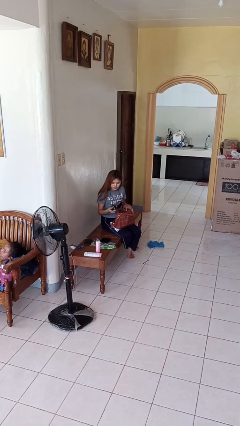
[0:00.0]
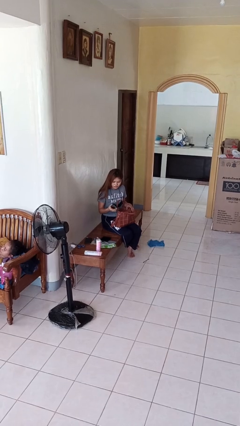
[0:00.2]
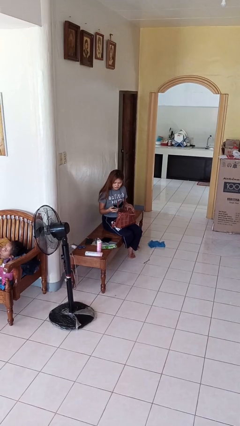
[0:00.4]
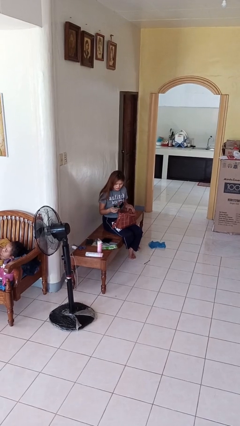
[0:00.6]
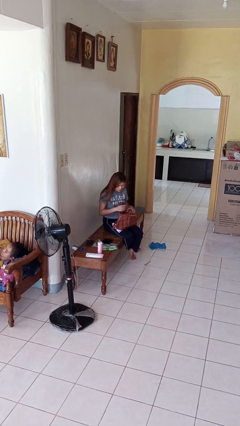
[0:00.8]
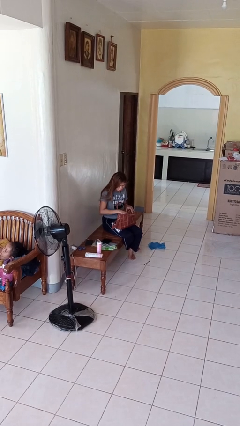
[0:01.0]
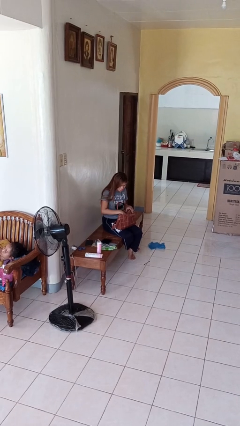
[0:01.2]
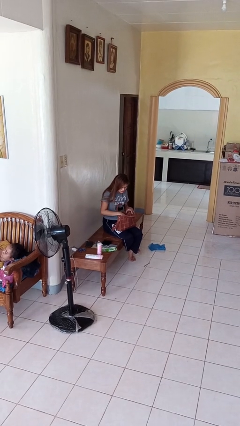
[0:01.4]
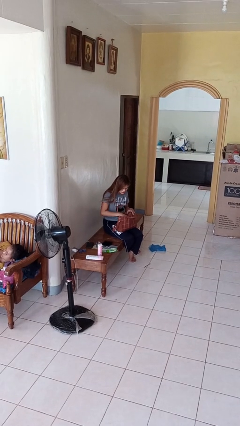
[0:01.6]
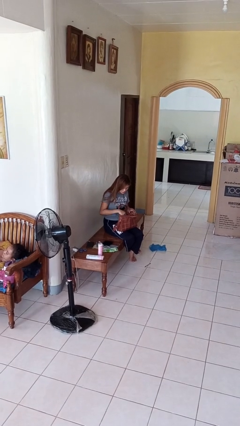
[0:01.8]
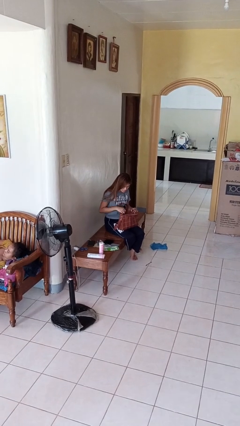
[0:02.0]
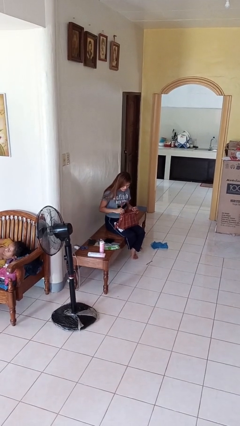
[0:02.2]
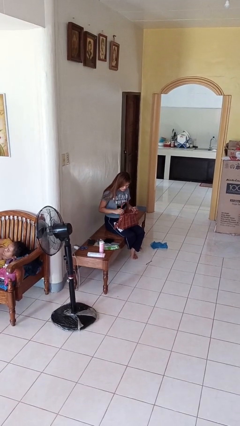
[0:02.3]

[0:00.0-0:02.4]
person puts object into purse

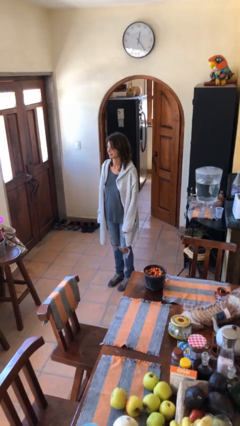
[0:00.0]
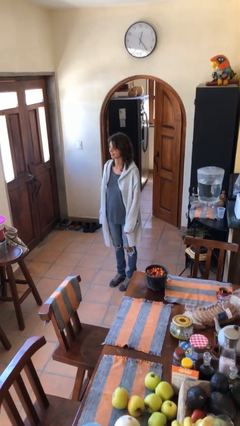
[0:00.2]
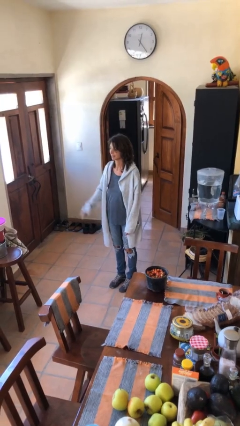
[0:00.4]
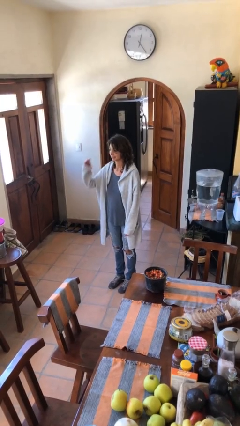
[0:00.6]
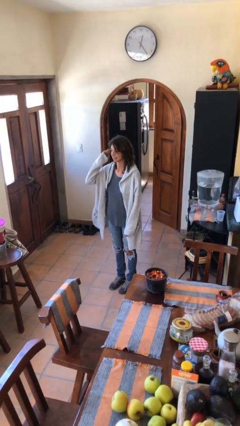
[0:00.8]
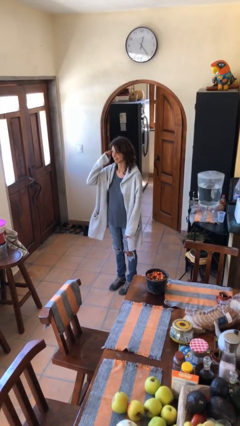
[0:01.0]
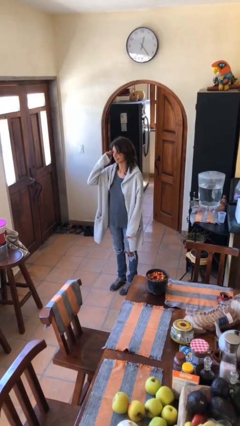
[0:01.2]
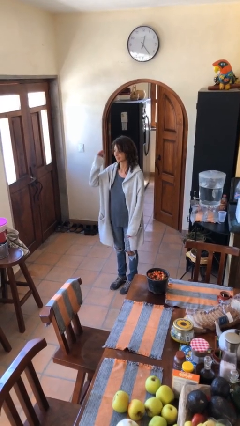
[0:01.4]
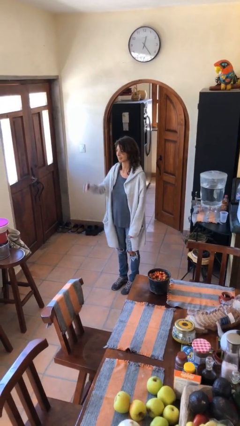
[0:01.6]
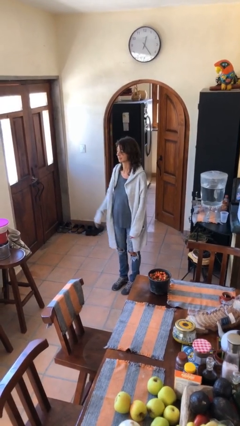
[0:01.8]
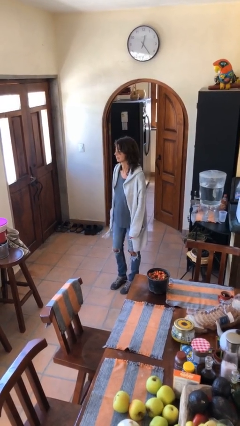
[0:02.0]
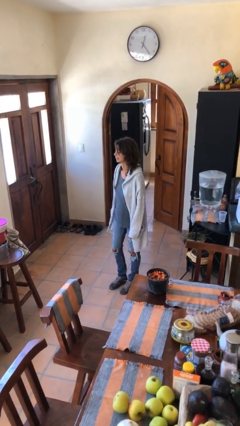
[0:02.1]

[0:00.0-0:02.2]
person salutes

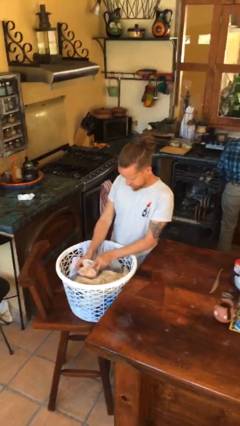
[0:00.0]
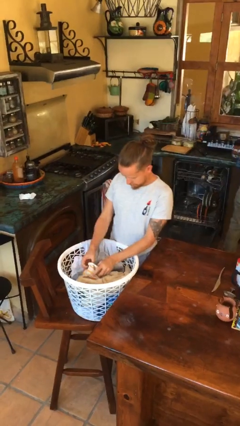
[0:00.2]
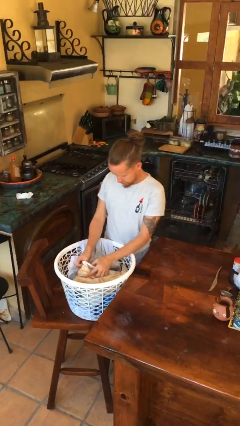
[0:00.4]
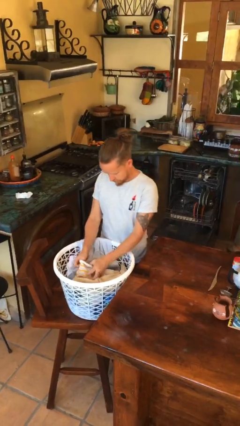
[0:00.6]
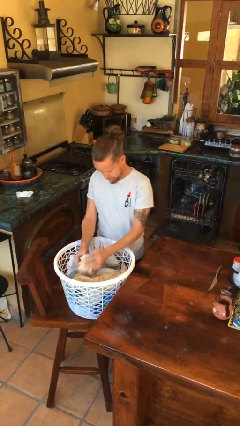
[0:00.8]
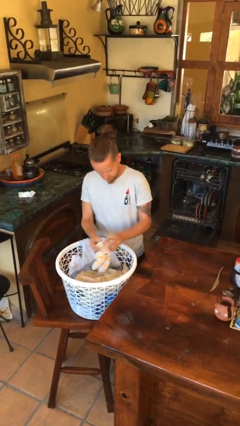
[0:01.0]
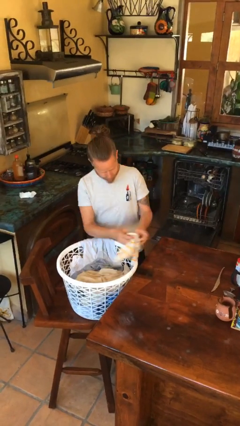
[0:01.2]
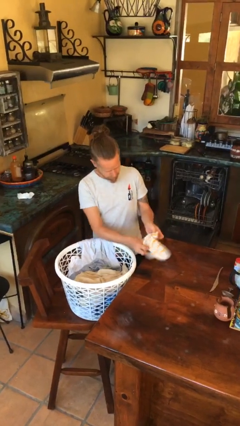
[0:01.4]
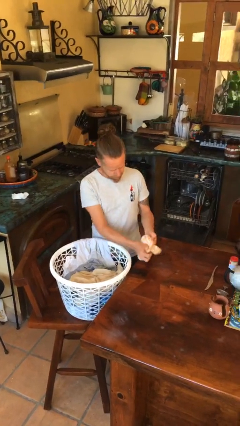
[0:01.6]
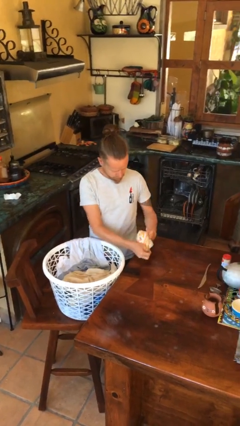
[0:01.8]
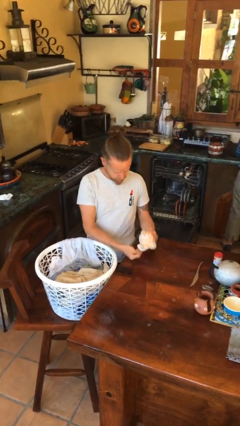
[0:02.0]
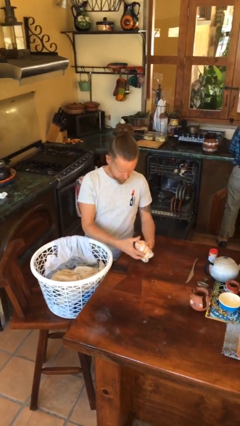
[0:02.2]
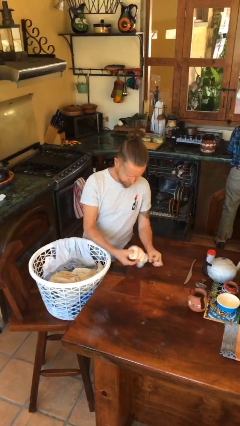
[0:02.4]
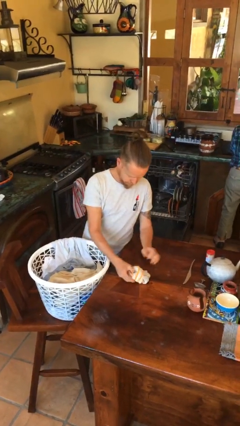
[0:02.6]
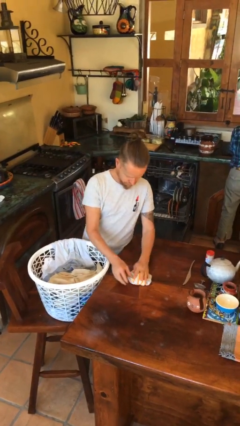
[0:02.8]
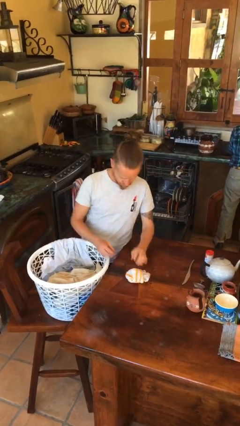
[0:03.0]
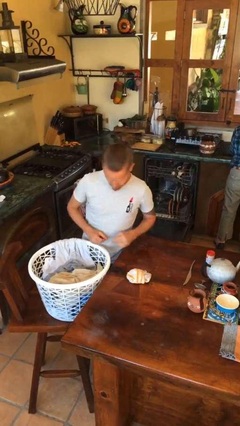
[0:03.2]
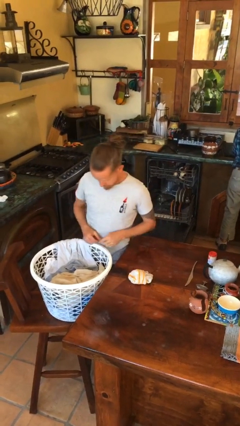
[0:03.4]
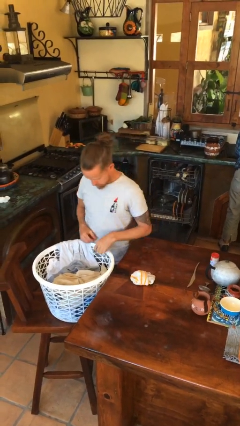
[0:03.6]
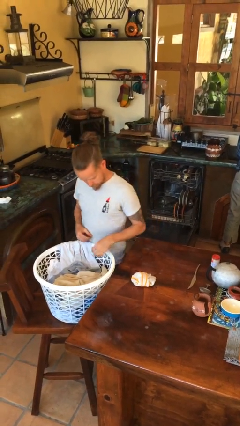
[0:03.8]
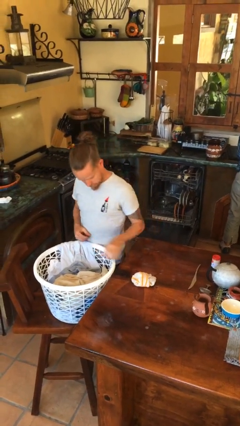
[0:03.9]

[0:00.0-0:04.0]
person folds socks

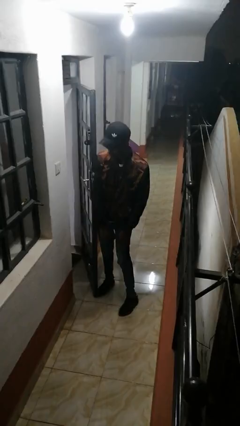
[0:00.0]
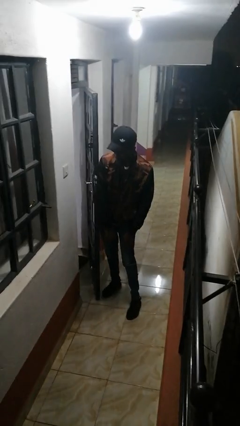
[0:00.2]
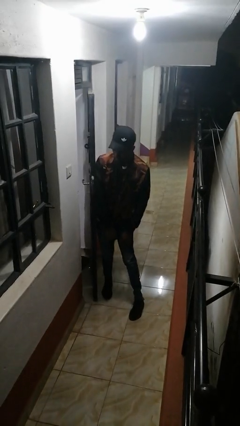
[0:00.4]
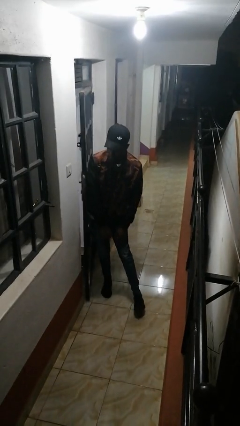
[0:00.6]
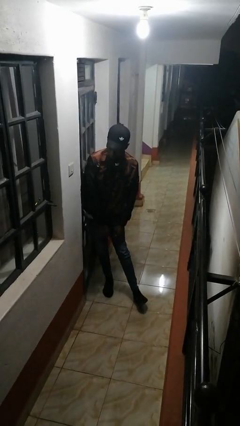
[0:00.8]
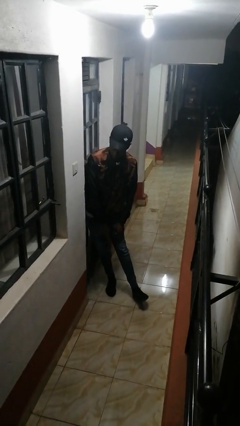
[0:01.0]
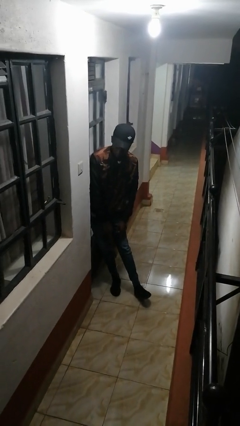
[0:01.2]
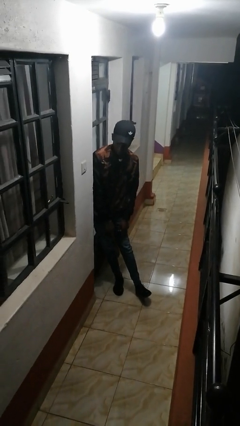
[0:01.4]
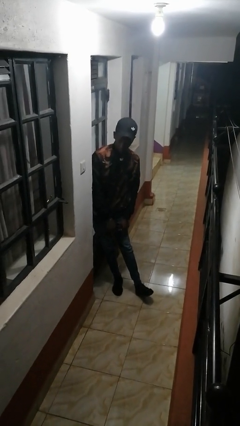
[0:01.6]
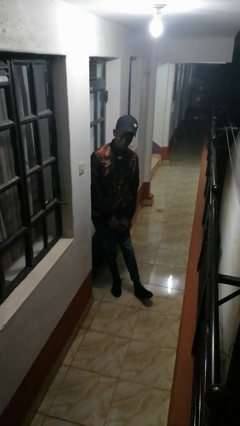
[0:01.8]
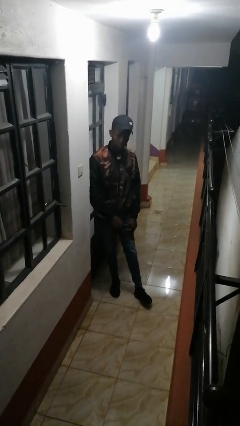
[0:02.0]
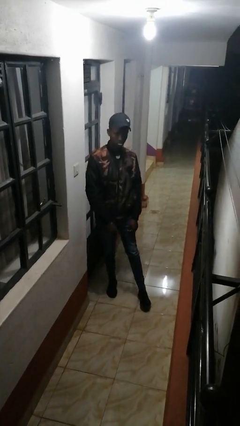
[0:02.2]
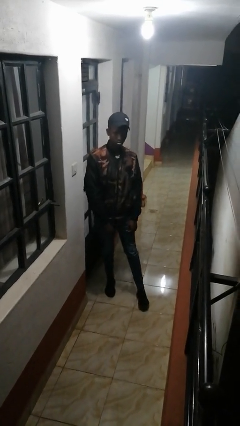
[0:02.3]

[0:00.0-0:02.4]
person closes door with hip

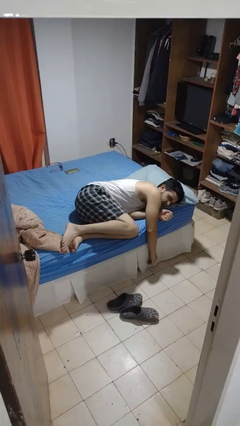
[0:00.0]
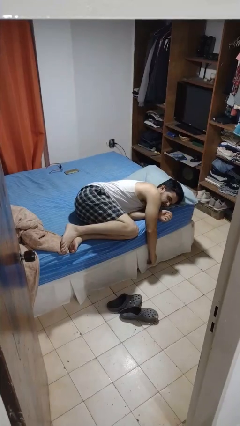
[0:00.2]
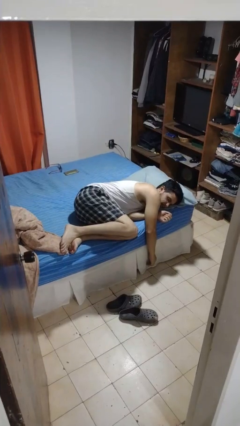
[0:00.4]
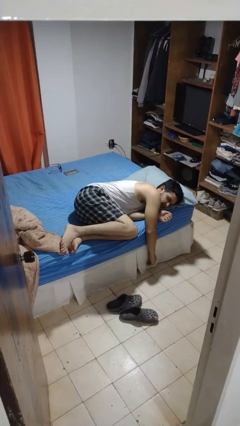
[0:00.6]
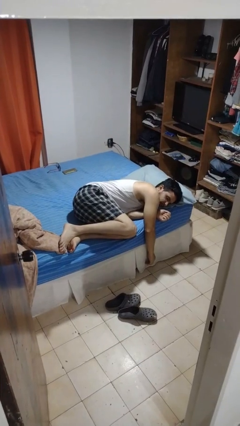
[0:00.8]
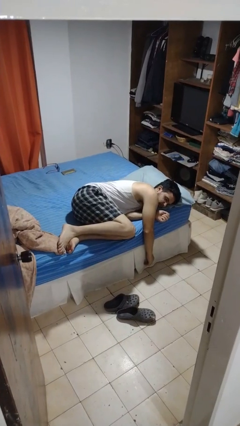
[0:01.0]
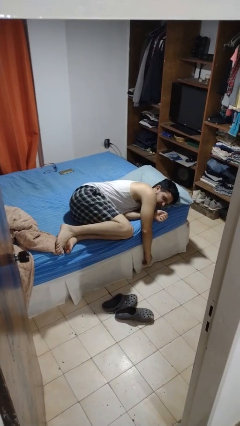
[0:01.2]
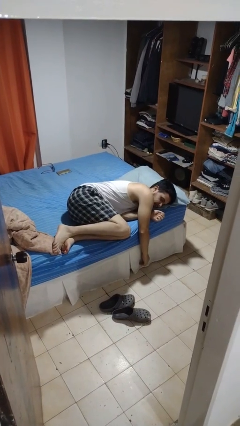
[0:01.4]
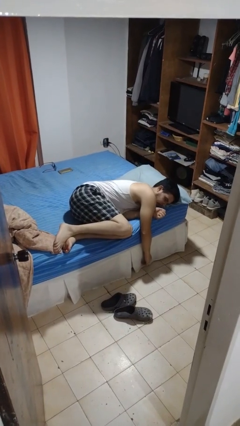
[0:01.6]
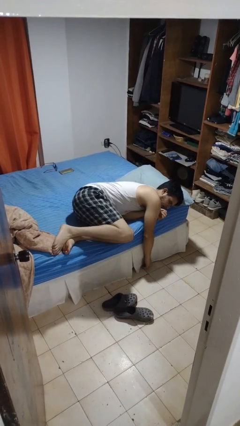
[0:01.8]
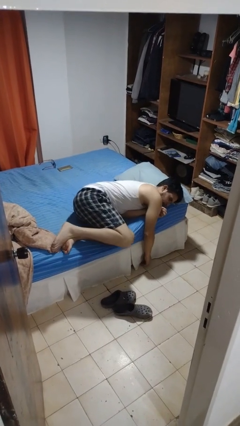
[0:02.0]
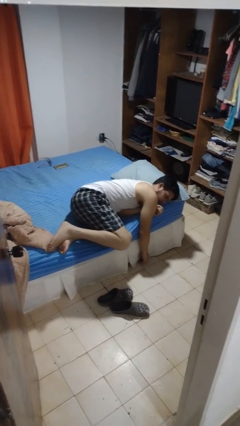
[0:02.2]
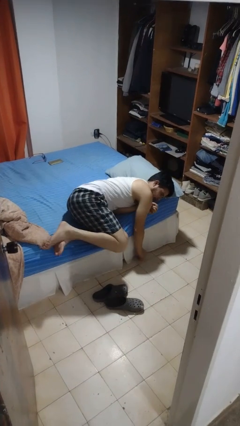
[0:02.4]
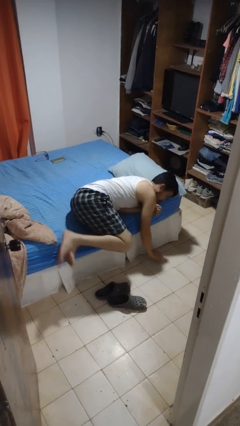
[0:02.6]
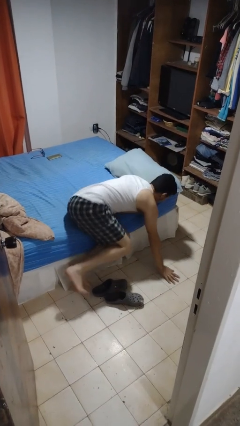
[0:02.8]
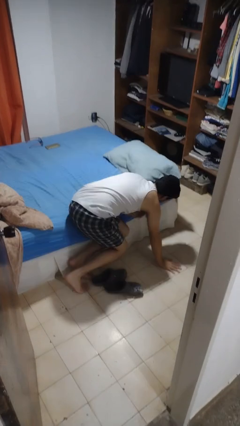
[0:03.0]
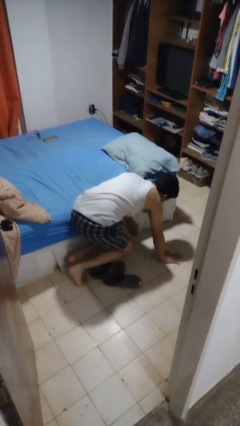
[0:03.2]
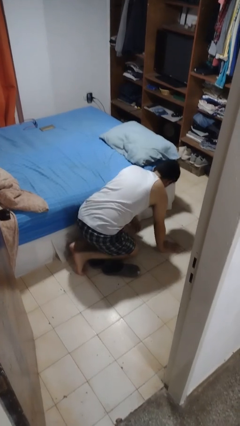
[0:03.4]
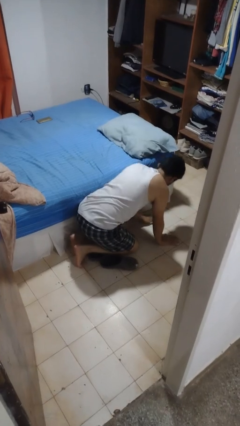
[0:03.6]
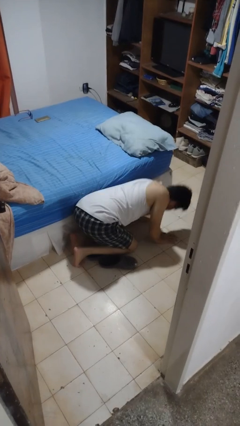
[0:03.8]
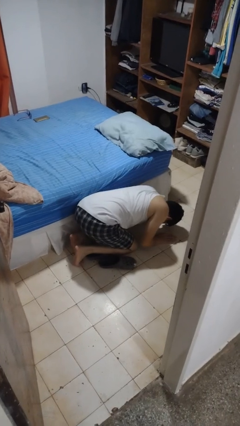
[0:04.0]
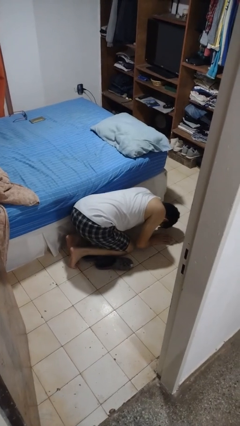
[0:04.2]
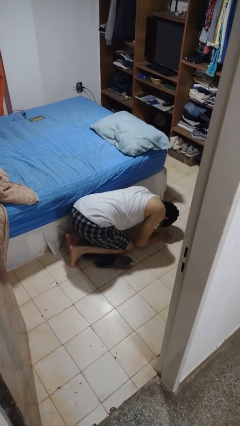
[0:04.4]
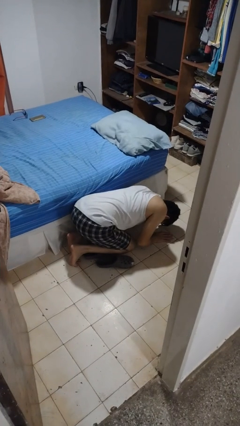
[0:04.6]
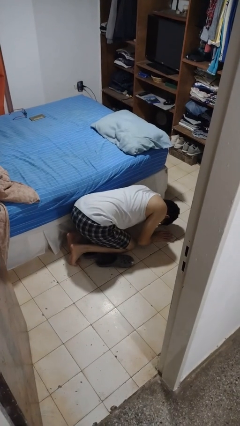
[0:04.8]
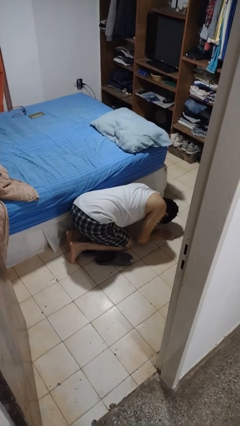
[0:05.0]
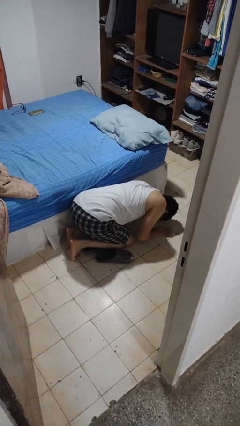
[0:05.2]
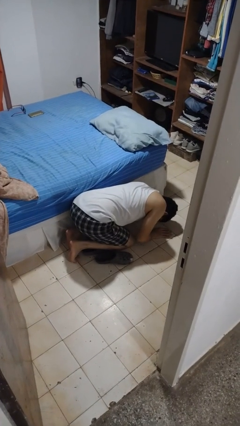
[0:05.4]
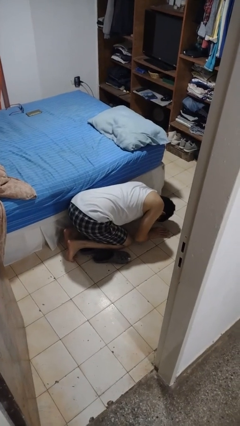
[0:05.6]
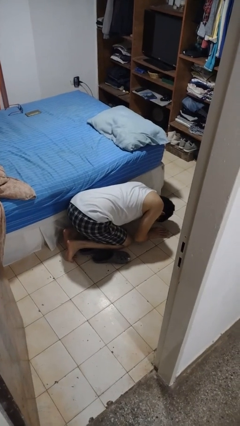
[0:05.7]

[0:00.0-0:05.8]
person falls from bed

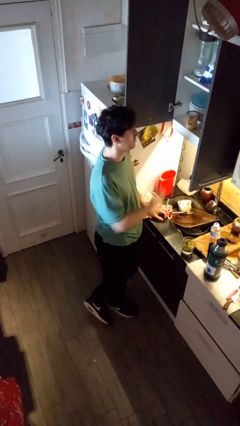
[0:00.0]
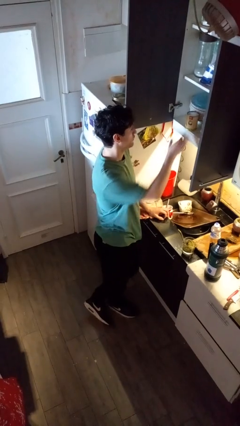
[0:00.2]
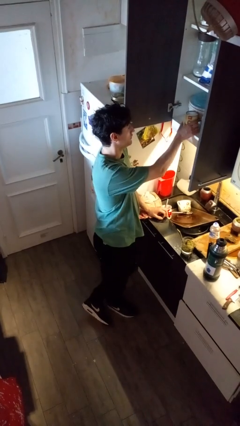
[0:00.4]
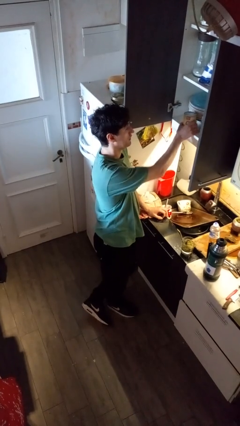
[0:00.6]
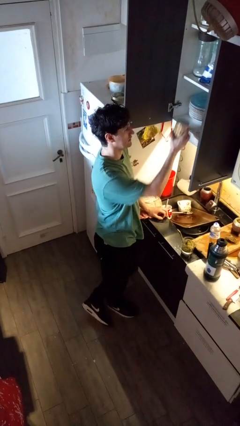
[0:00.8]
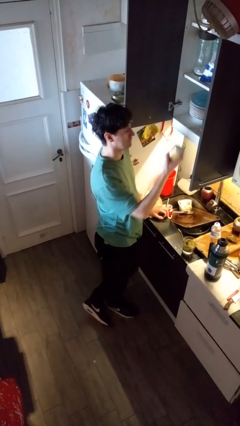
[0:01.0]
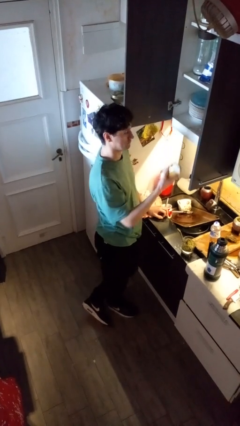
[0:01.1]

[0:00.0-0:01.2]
person takes object from kitchen drawer
